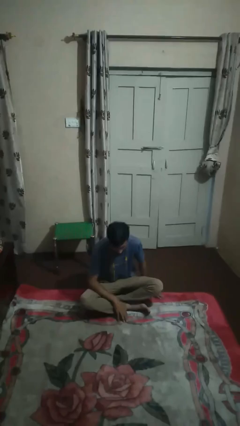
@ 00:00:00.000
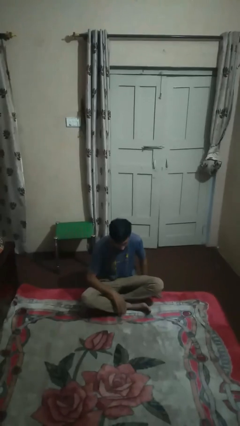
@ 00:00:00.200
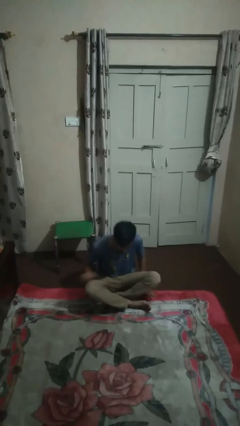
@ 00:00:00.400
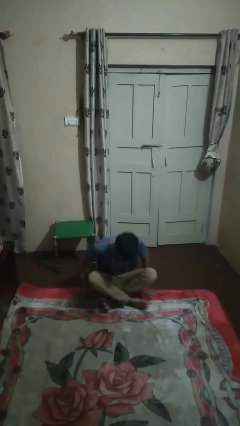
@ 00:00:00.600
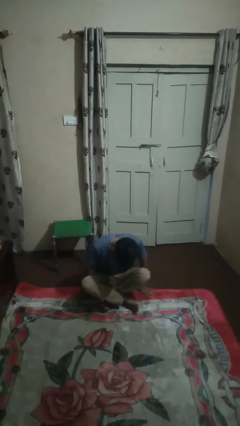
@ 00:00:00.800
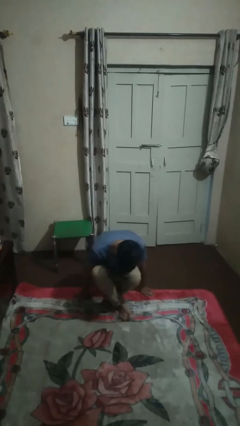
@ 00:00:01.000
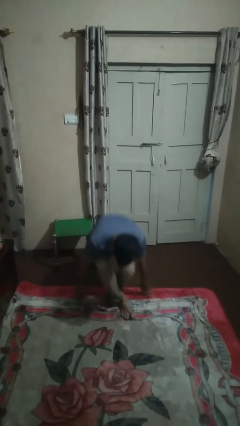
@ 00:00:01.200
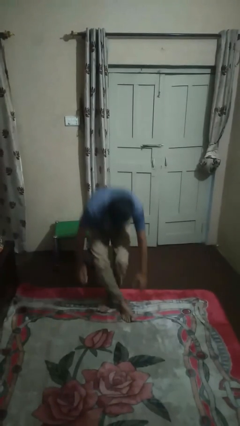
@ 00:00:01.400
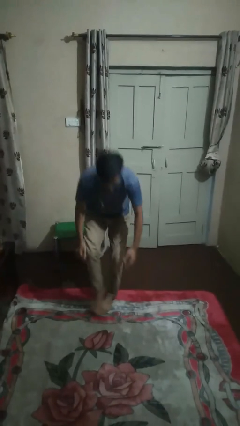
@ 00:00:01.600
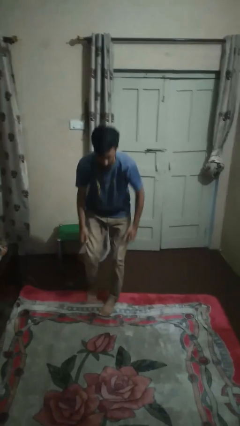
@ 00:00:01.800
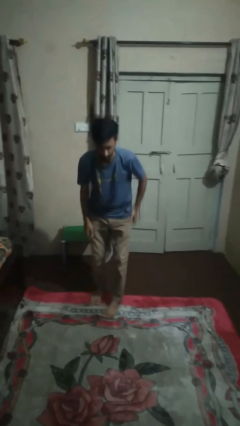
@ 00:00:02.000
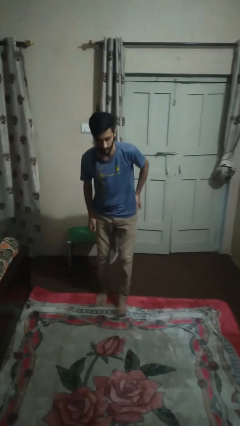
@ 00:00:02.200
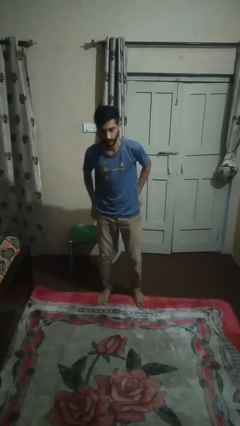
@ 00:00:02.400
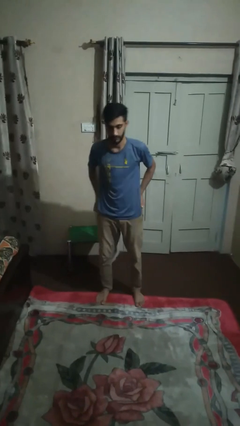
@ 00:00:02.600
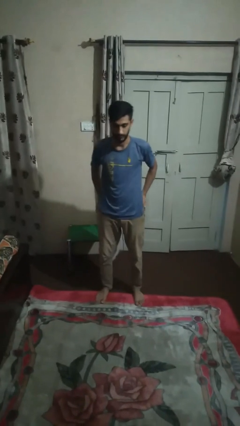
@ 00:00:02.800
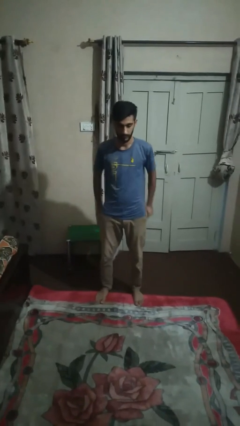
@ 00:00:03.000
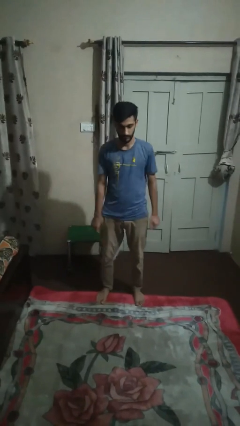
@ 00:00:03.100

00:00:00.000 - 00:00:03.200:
person stands up from floor

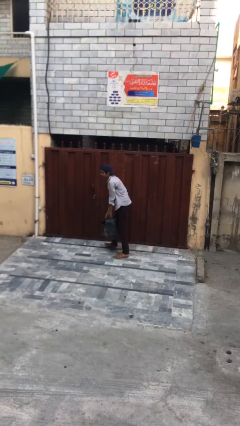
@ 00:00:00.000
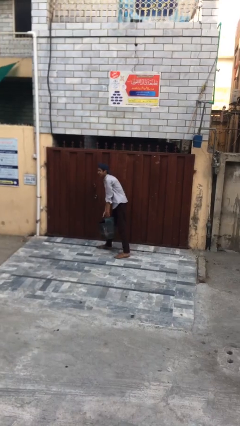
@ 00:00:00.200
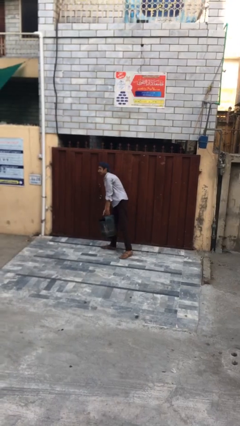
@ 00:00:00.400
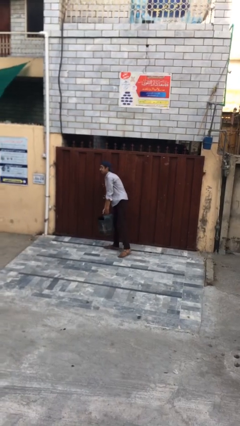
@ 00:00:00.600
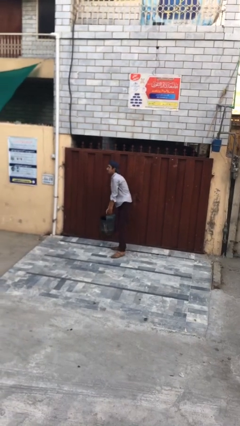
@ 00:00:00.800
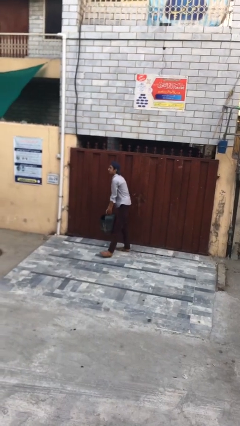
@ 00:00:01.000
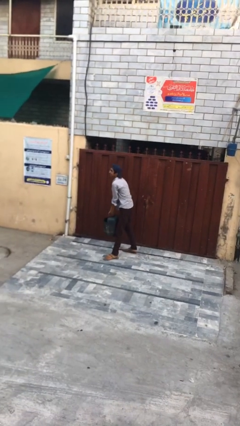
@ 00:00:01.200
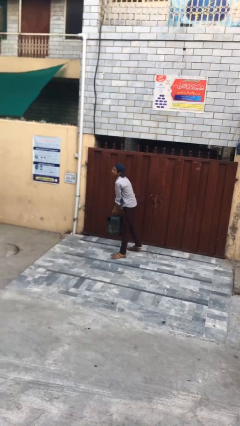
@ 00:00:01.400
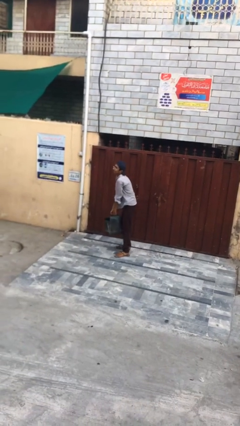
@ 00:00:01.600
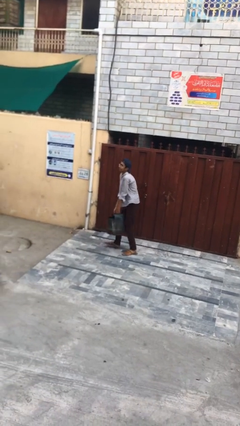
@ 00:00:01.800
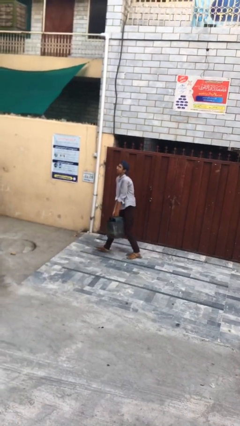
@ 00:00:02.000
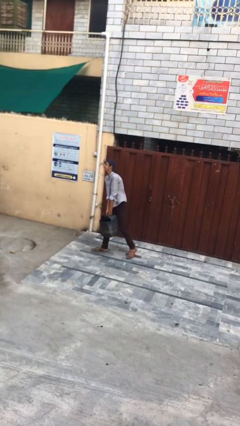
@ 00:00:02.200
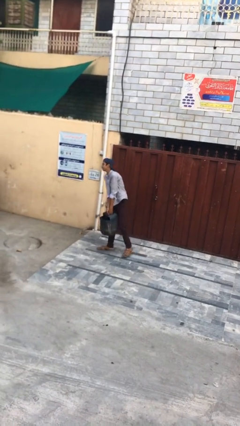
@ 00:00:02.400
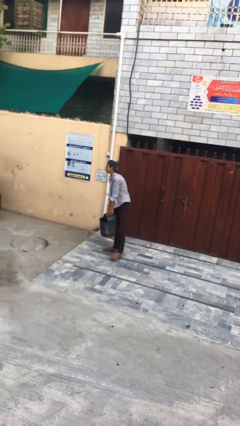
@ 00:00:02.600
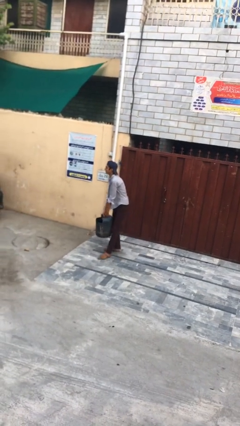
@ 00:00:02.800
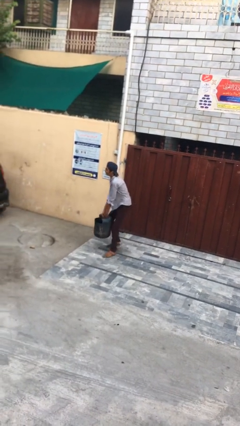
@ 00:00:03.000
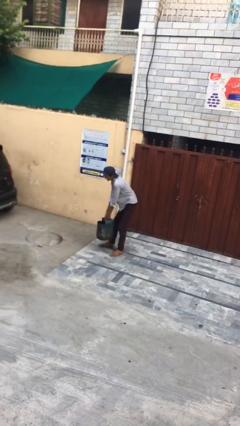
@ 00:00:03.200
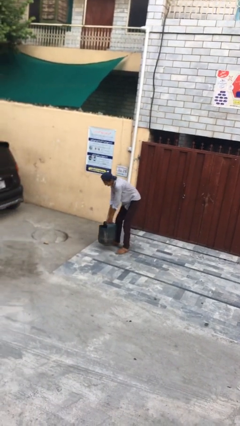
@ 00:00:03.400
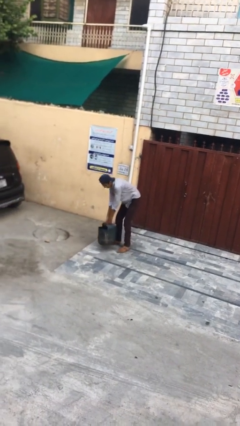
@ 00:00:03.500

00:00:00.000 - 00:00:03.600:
person carries heavy object

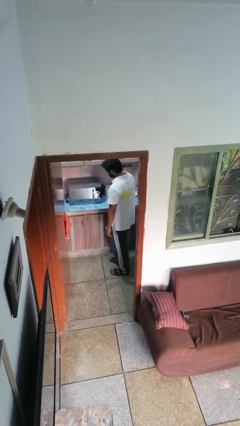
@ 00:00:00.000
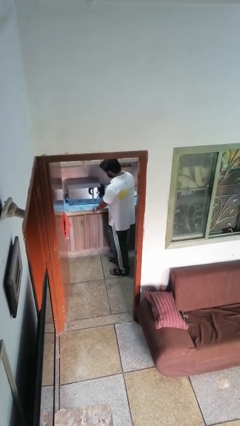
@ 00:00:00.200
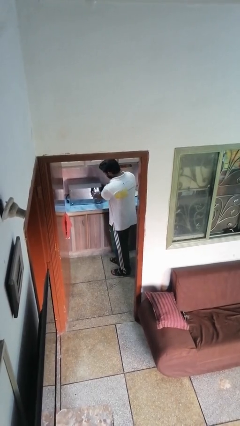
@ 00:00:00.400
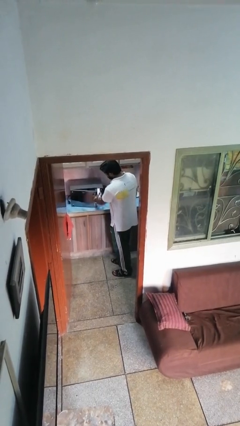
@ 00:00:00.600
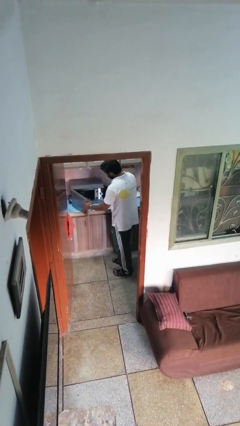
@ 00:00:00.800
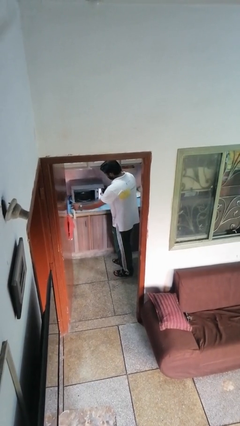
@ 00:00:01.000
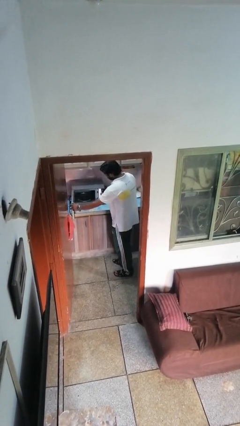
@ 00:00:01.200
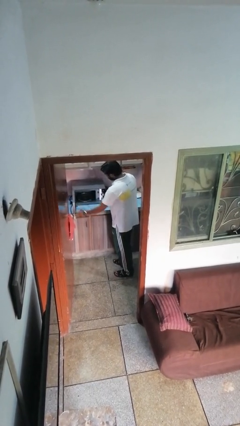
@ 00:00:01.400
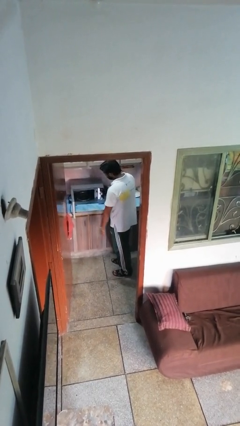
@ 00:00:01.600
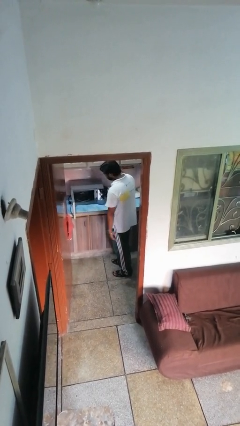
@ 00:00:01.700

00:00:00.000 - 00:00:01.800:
person opens microwave

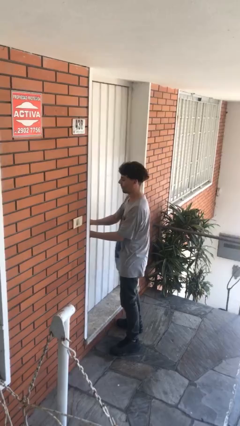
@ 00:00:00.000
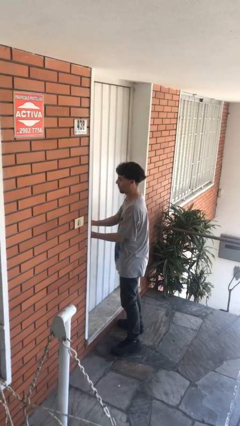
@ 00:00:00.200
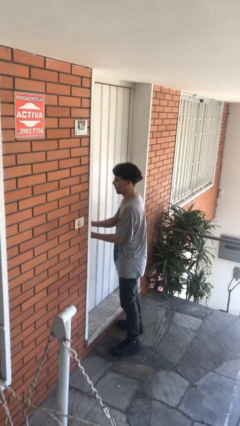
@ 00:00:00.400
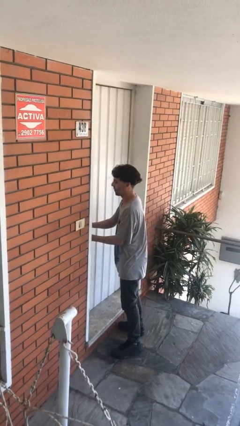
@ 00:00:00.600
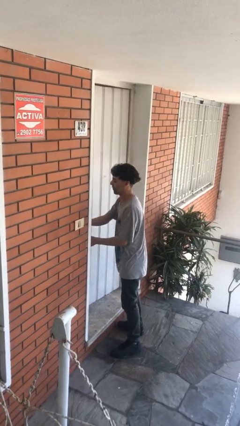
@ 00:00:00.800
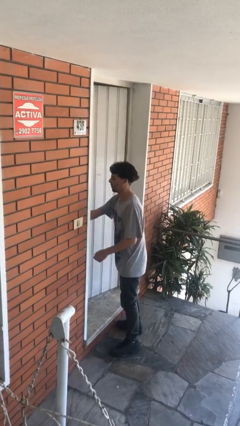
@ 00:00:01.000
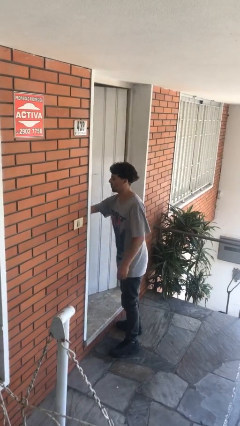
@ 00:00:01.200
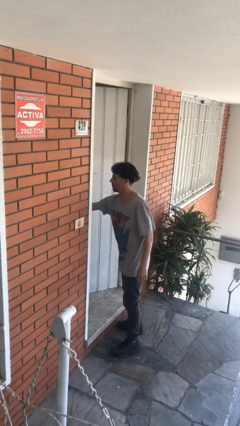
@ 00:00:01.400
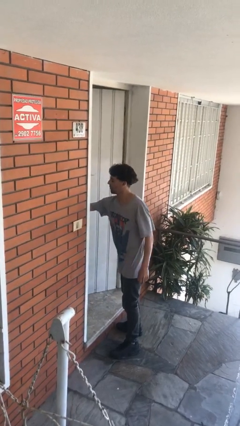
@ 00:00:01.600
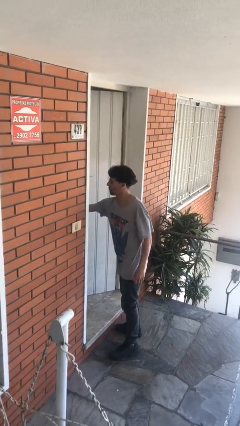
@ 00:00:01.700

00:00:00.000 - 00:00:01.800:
person opens facility door

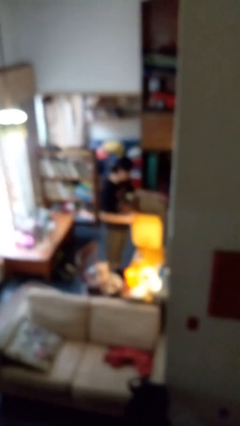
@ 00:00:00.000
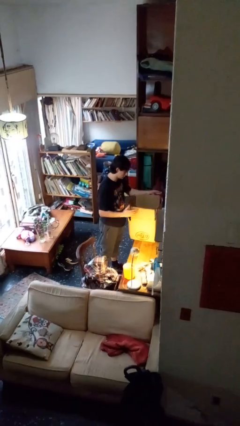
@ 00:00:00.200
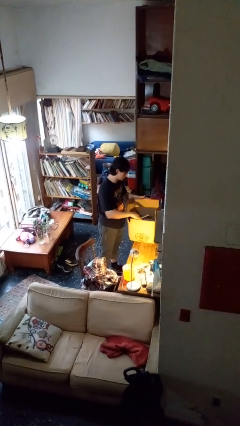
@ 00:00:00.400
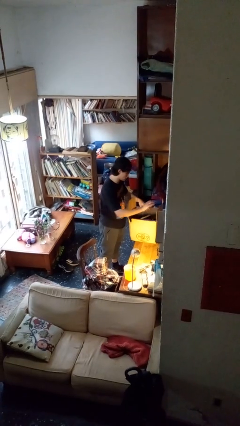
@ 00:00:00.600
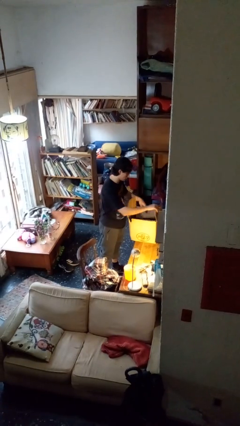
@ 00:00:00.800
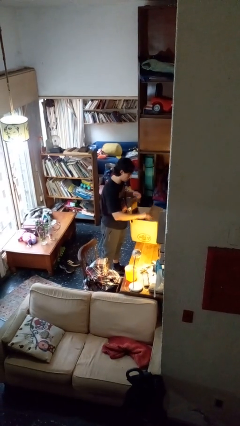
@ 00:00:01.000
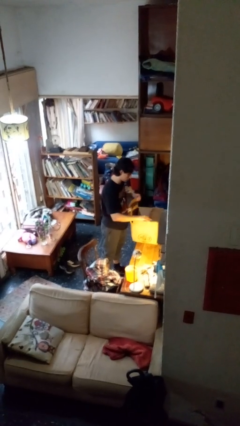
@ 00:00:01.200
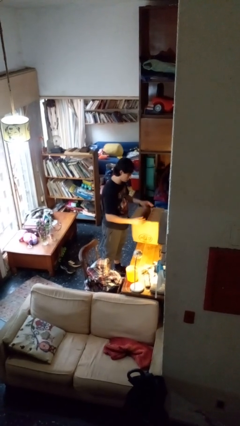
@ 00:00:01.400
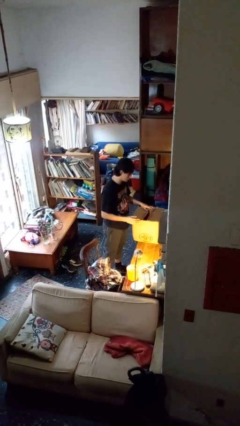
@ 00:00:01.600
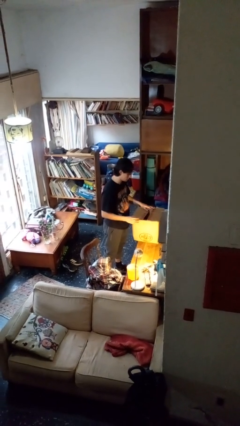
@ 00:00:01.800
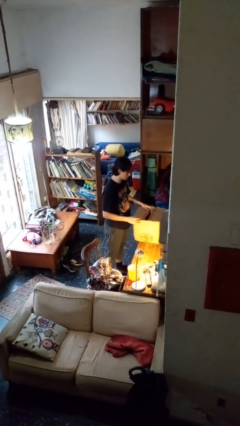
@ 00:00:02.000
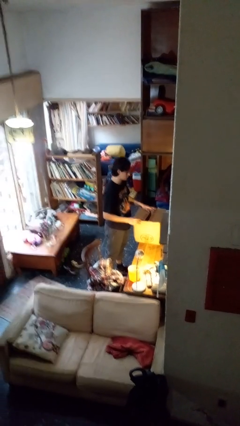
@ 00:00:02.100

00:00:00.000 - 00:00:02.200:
person closes box

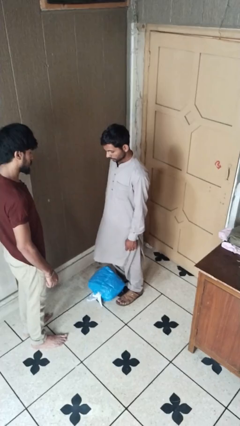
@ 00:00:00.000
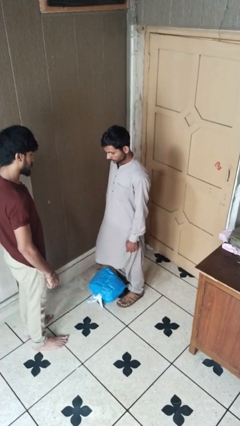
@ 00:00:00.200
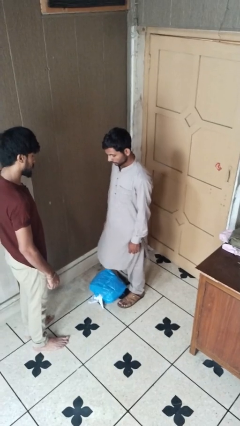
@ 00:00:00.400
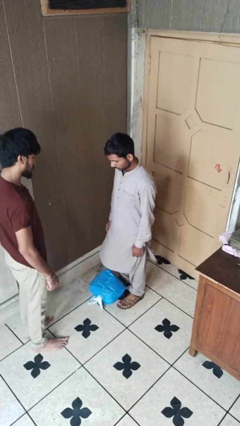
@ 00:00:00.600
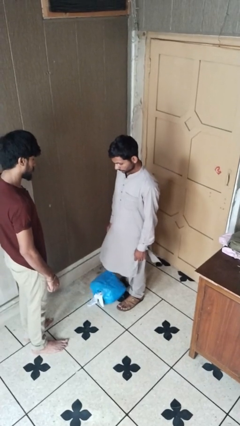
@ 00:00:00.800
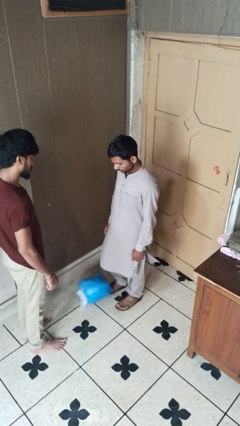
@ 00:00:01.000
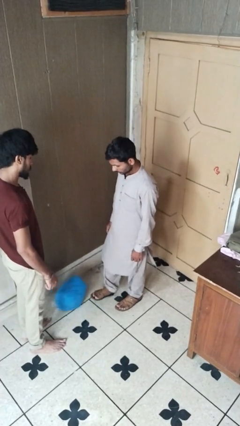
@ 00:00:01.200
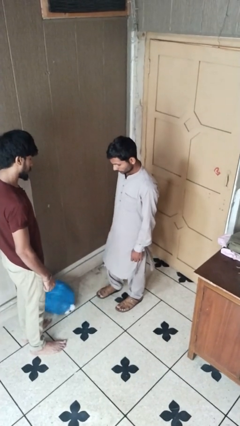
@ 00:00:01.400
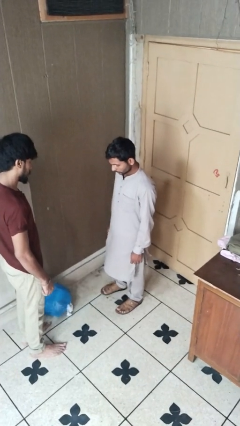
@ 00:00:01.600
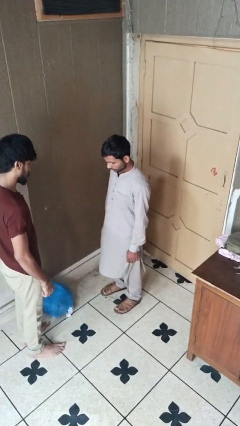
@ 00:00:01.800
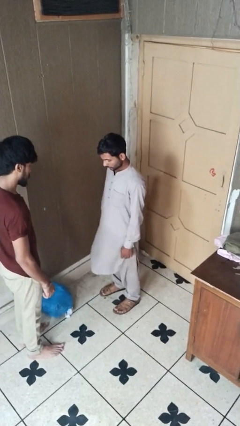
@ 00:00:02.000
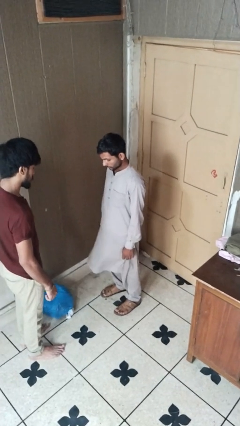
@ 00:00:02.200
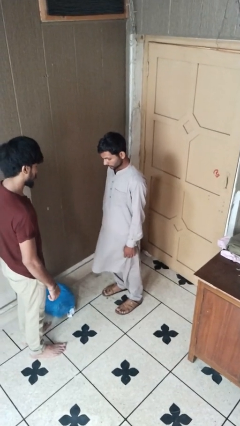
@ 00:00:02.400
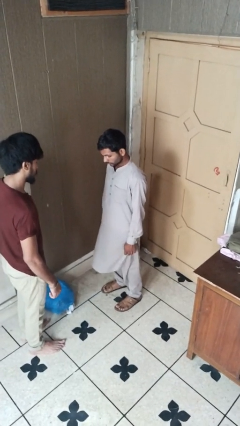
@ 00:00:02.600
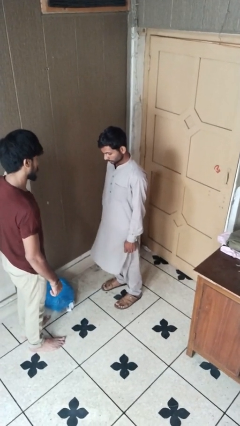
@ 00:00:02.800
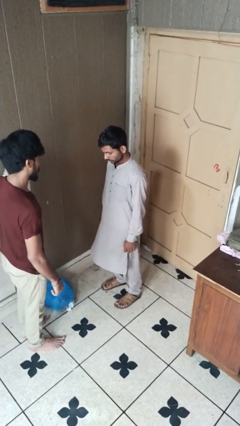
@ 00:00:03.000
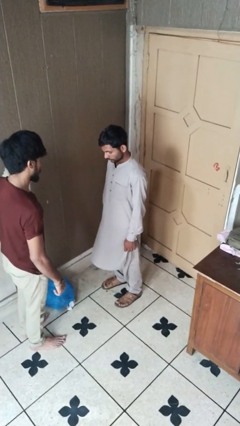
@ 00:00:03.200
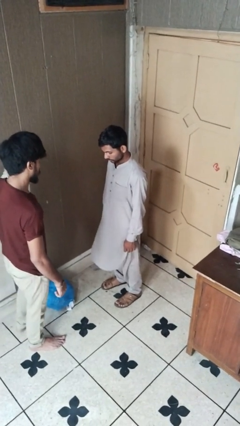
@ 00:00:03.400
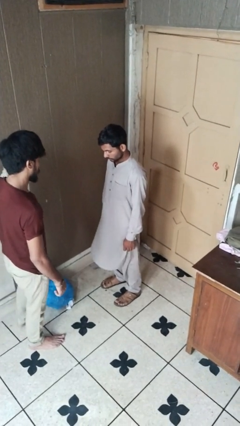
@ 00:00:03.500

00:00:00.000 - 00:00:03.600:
person kicks object to person

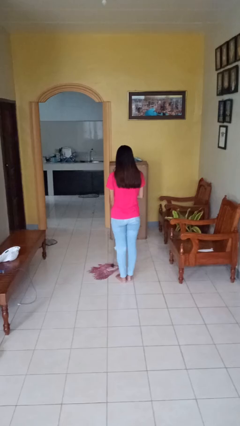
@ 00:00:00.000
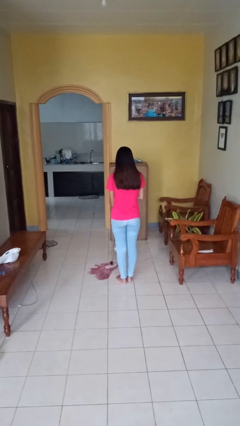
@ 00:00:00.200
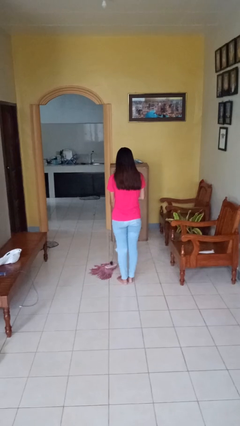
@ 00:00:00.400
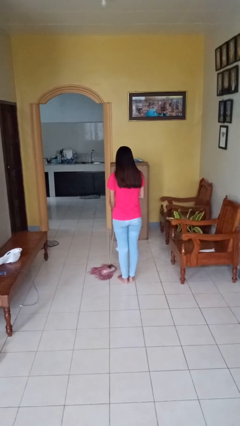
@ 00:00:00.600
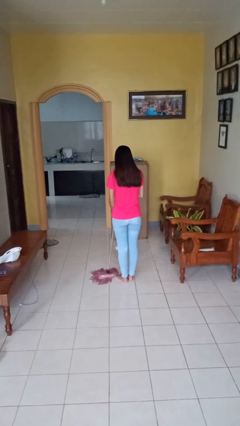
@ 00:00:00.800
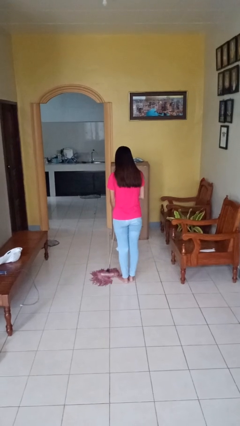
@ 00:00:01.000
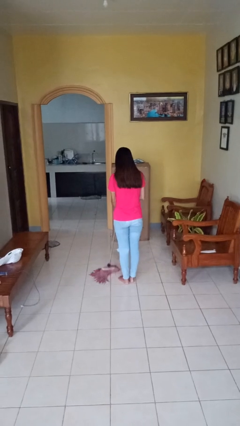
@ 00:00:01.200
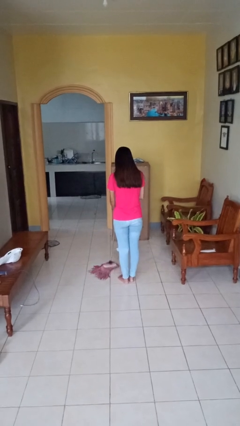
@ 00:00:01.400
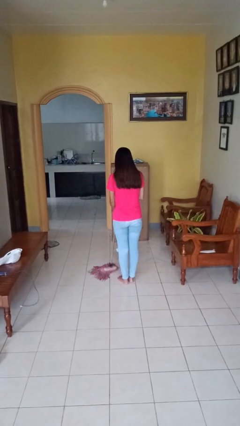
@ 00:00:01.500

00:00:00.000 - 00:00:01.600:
person mops
